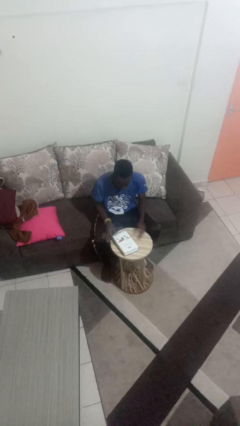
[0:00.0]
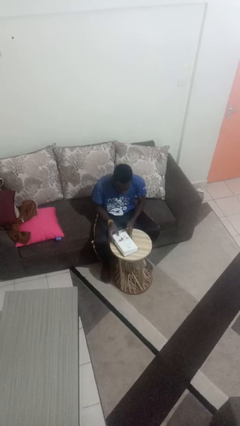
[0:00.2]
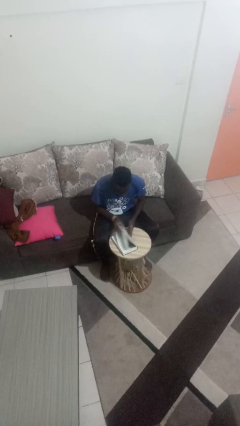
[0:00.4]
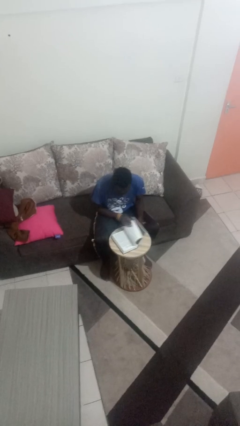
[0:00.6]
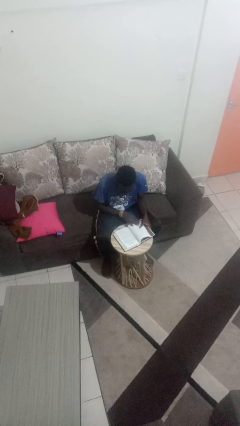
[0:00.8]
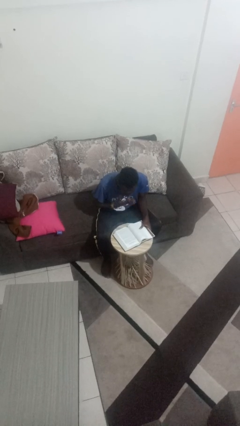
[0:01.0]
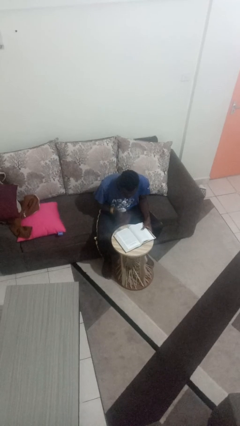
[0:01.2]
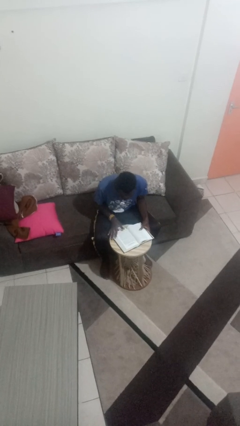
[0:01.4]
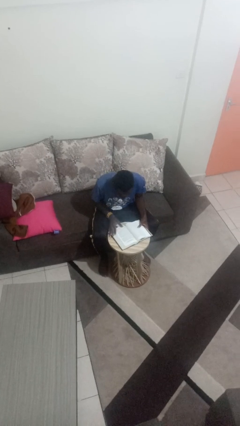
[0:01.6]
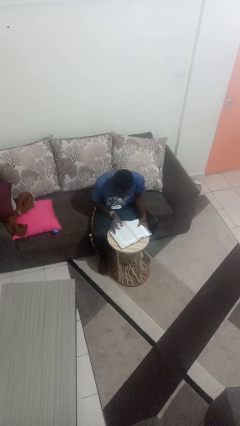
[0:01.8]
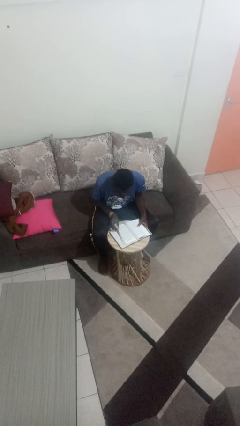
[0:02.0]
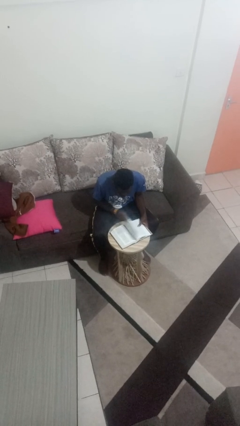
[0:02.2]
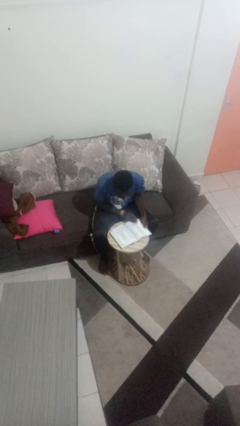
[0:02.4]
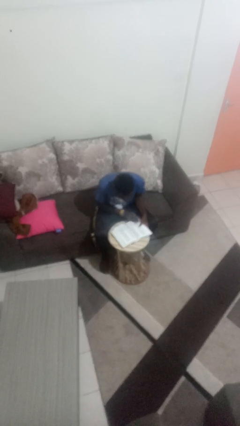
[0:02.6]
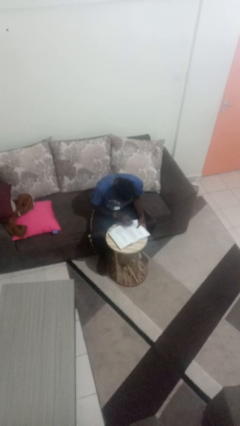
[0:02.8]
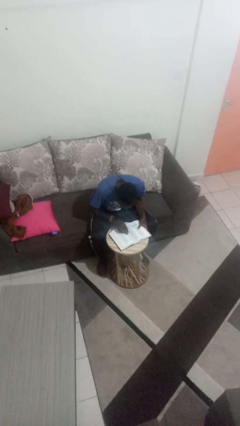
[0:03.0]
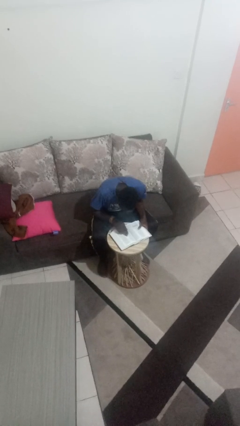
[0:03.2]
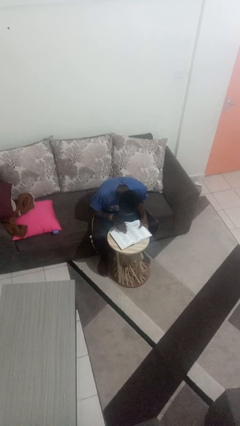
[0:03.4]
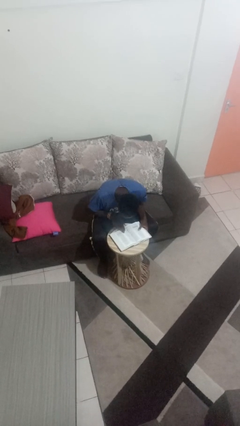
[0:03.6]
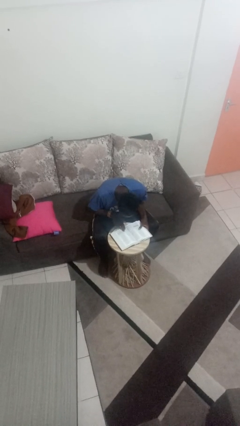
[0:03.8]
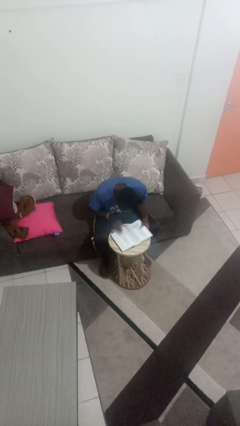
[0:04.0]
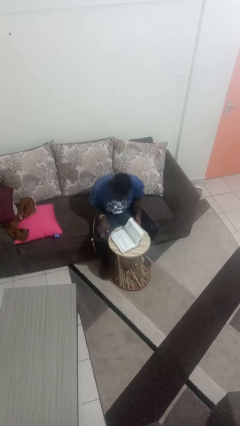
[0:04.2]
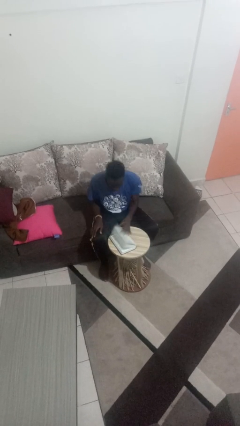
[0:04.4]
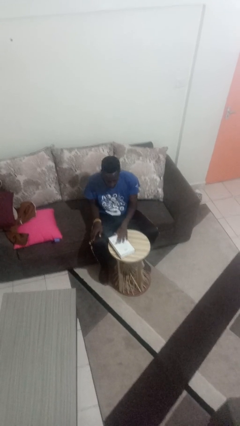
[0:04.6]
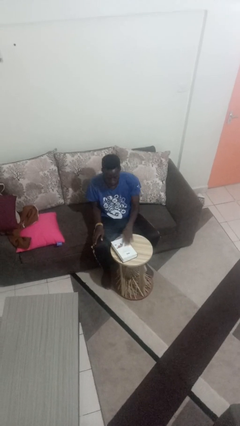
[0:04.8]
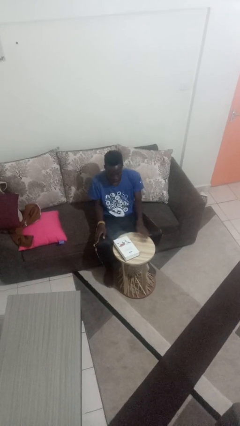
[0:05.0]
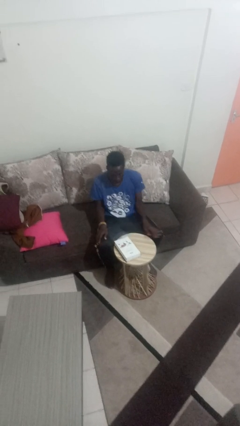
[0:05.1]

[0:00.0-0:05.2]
person reads book

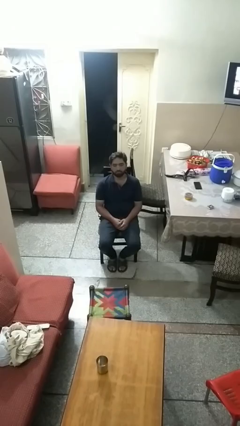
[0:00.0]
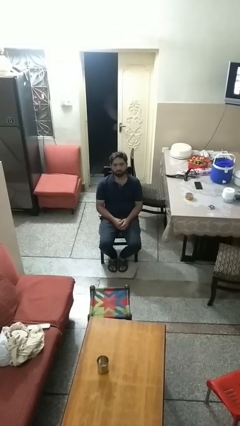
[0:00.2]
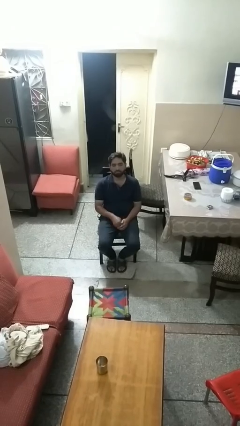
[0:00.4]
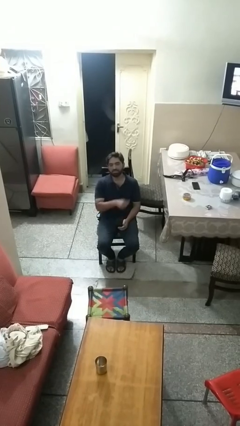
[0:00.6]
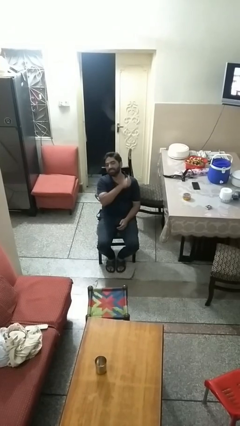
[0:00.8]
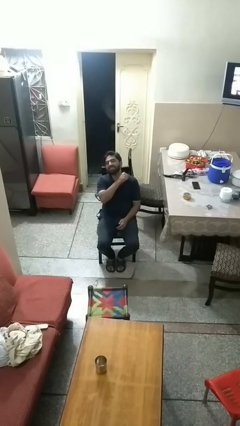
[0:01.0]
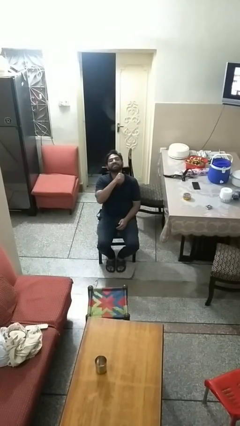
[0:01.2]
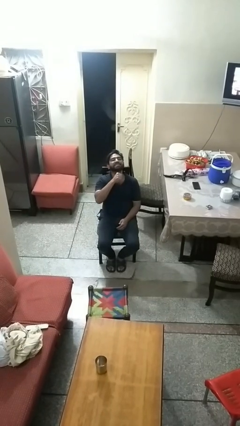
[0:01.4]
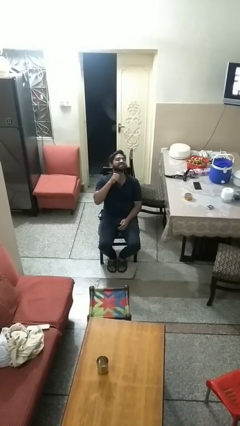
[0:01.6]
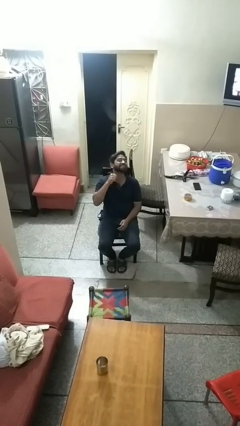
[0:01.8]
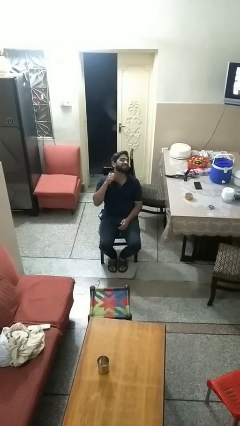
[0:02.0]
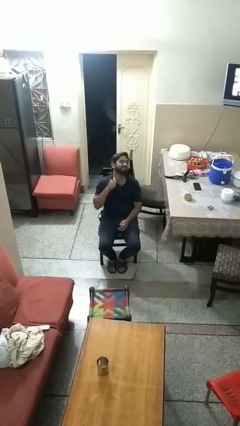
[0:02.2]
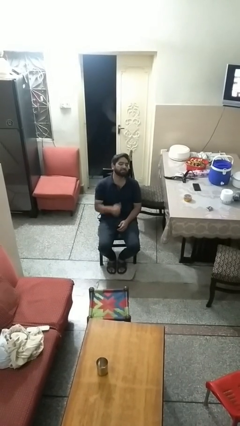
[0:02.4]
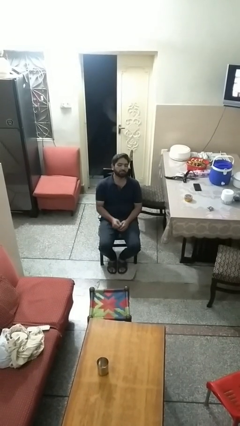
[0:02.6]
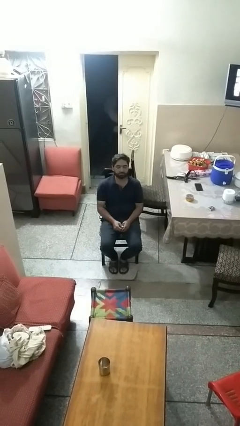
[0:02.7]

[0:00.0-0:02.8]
person gestures cut

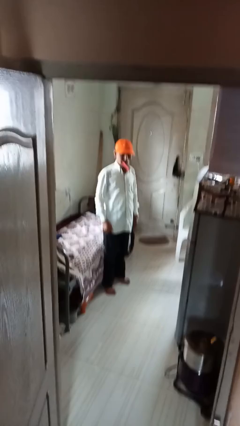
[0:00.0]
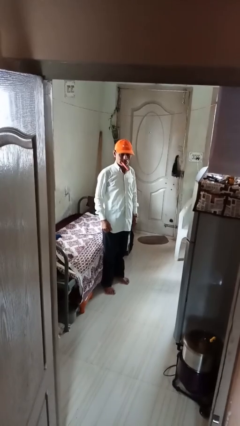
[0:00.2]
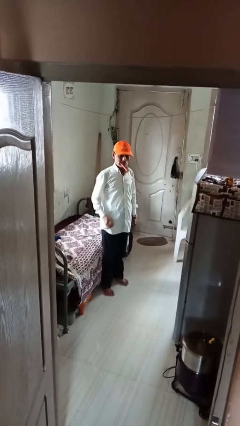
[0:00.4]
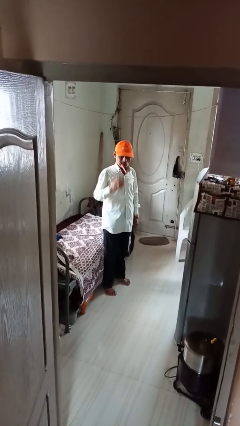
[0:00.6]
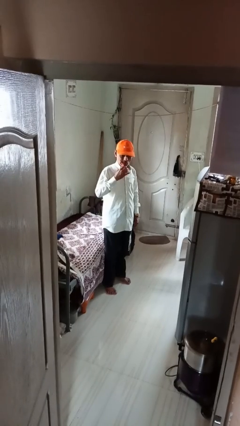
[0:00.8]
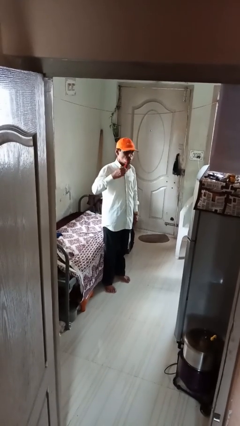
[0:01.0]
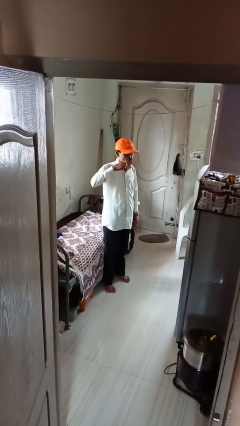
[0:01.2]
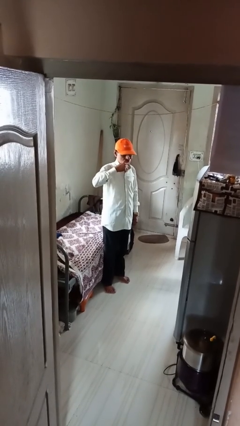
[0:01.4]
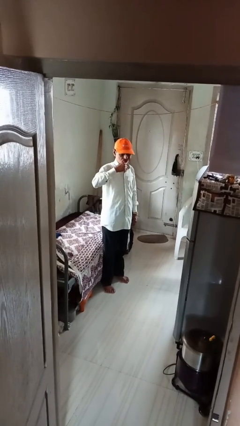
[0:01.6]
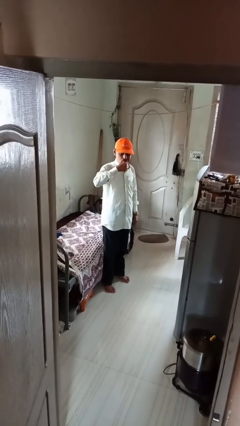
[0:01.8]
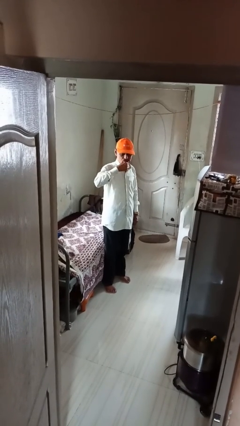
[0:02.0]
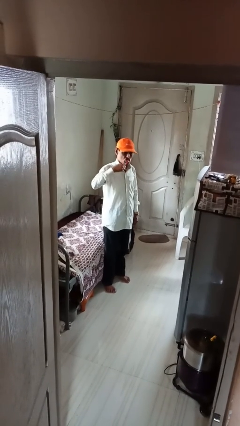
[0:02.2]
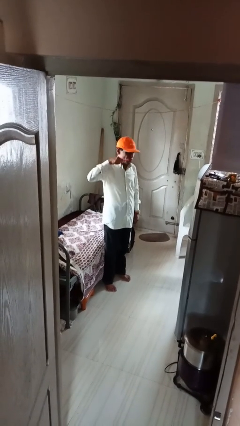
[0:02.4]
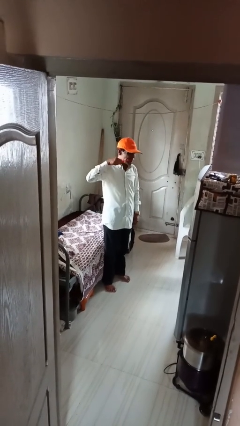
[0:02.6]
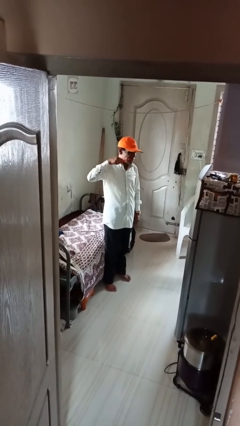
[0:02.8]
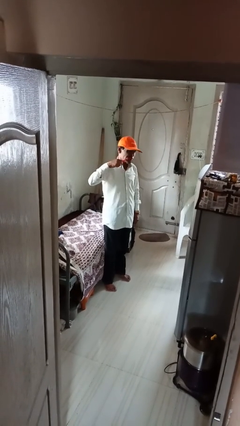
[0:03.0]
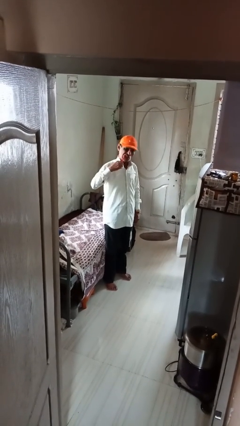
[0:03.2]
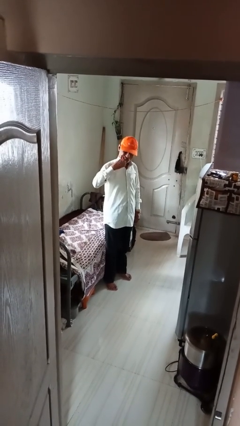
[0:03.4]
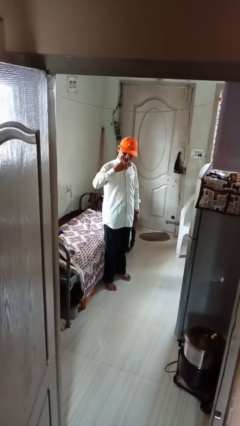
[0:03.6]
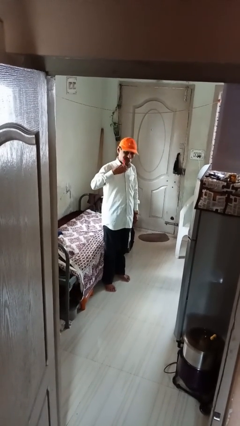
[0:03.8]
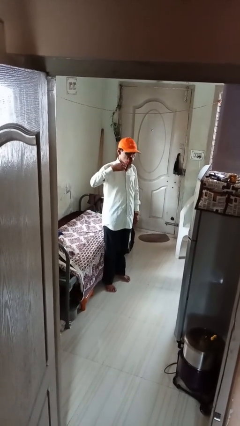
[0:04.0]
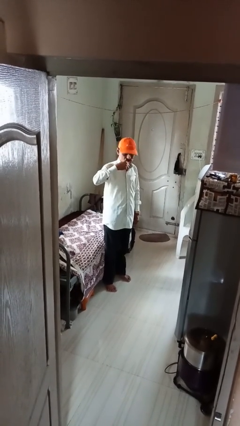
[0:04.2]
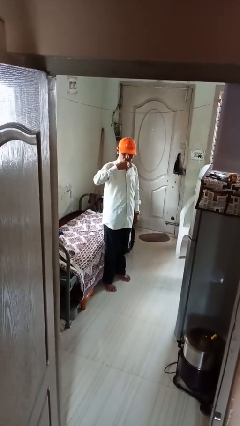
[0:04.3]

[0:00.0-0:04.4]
person brushes teeth

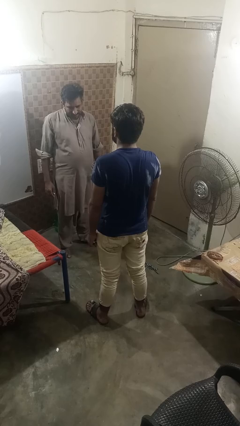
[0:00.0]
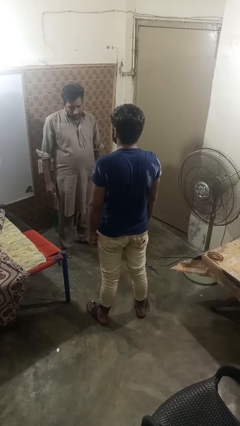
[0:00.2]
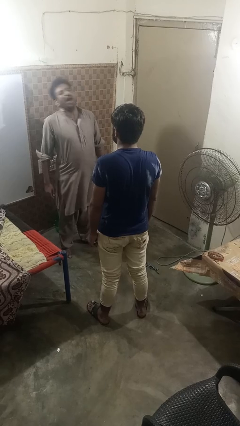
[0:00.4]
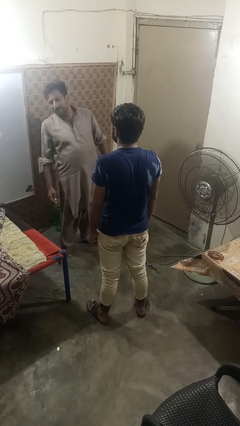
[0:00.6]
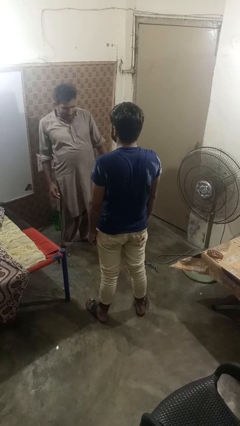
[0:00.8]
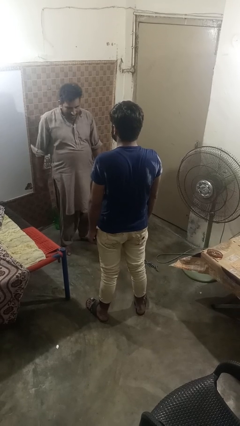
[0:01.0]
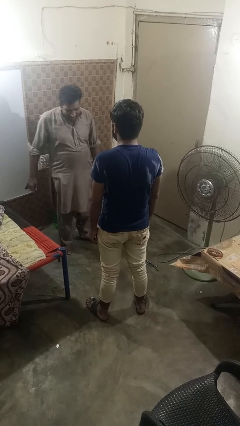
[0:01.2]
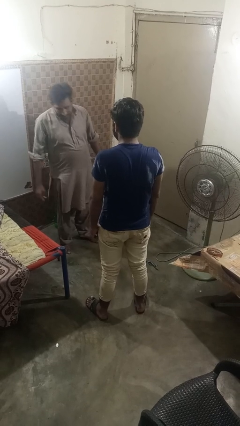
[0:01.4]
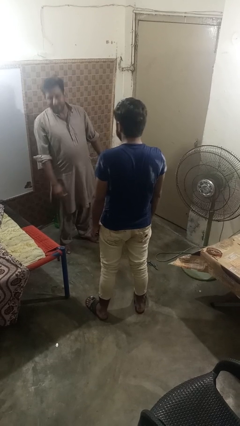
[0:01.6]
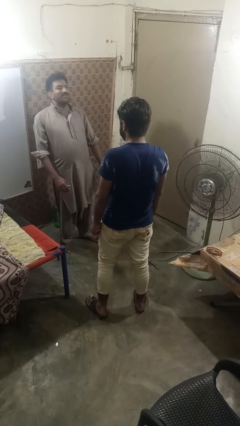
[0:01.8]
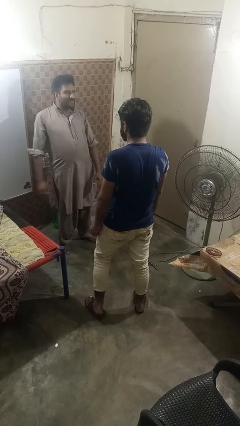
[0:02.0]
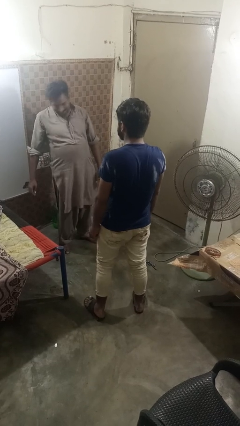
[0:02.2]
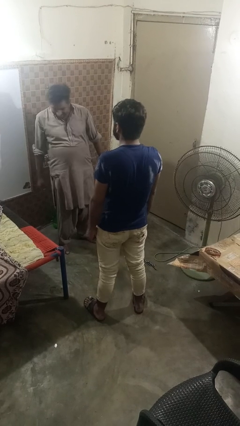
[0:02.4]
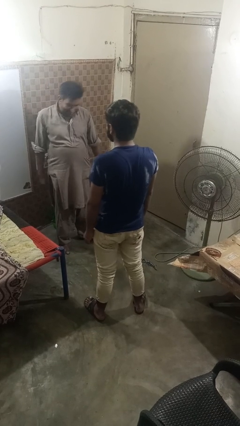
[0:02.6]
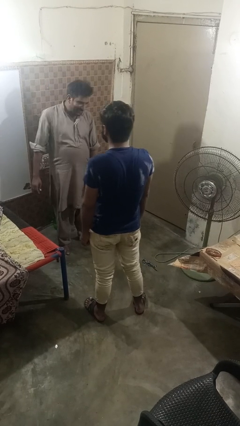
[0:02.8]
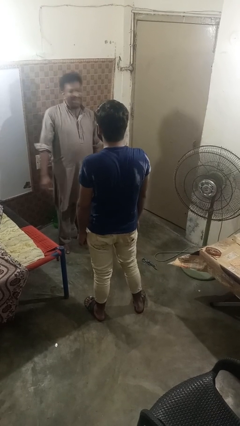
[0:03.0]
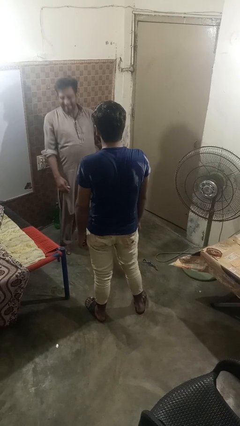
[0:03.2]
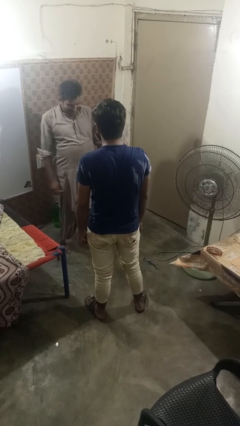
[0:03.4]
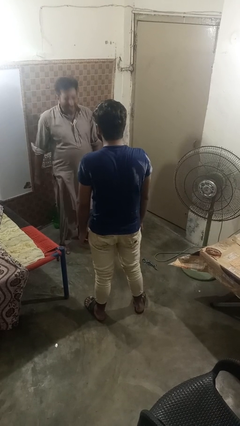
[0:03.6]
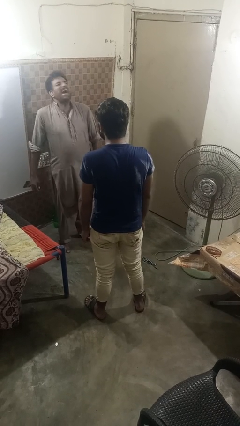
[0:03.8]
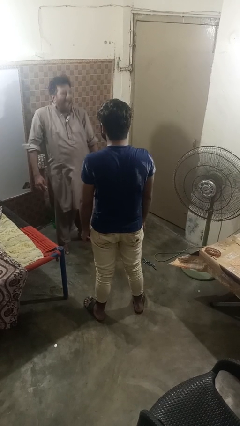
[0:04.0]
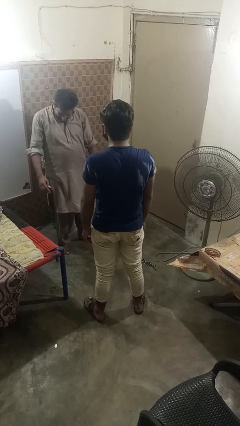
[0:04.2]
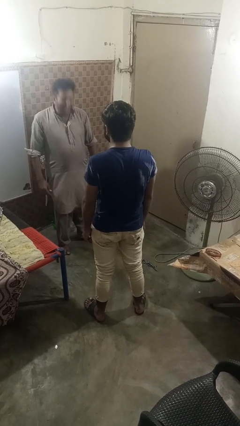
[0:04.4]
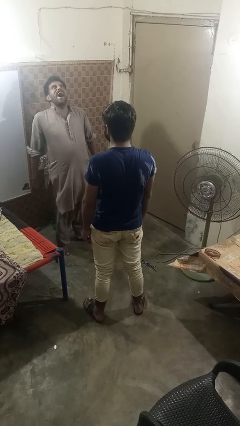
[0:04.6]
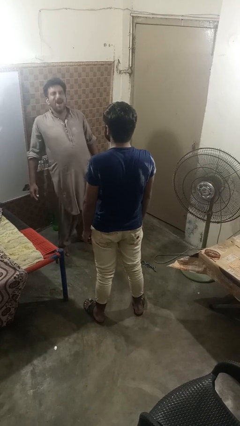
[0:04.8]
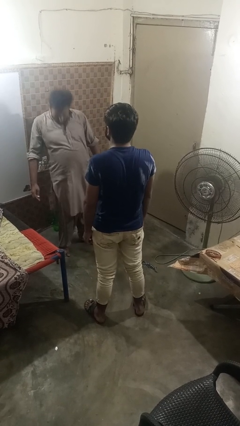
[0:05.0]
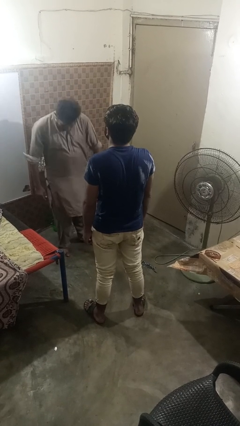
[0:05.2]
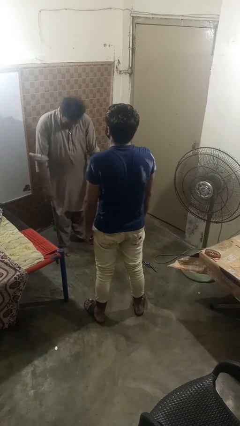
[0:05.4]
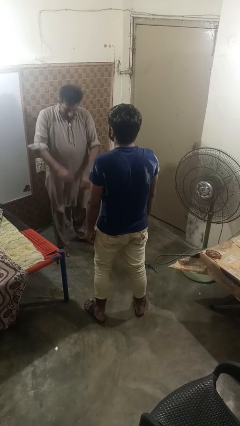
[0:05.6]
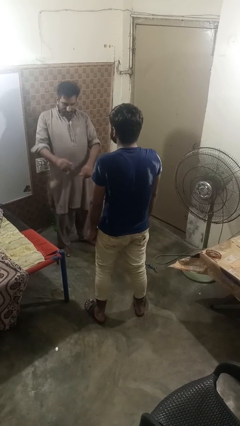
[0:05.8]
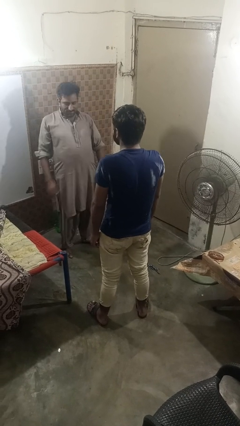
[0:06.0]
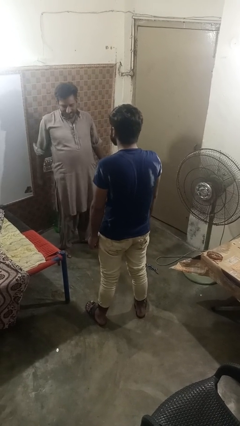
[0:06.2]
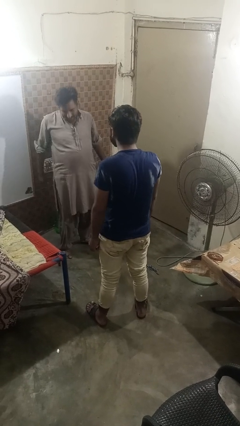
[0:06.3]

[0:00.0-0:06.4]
person laughs with person
